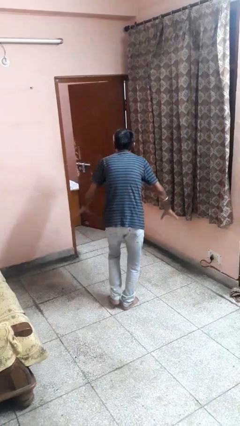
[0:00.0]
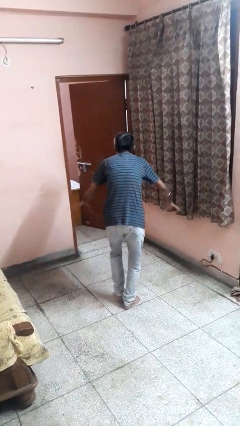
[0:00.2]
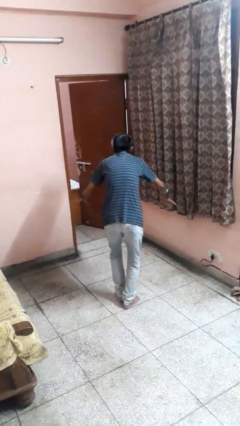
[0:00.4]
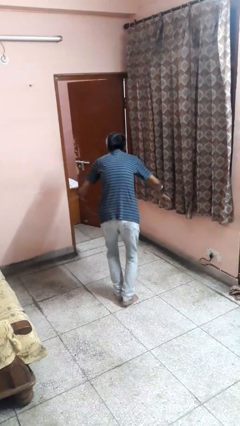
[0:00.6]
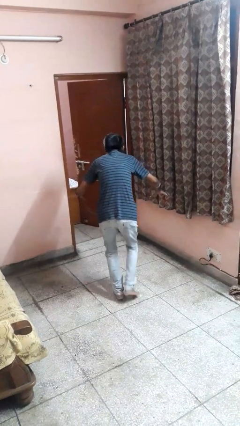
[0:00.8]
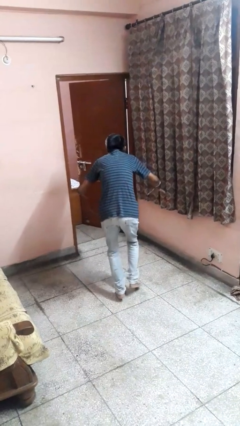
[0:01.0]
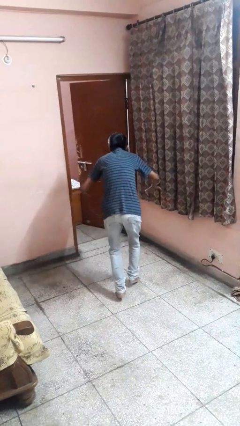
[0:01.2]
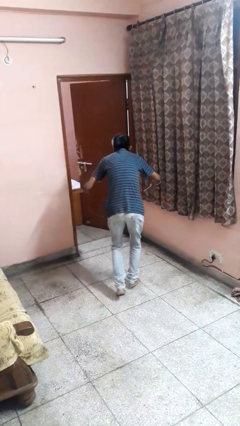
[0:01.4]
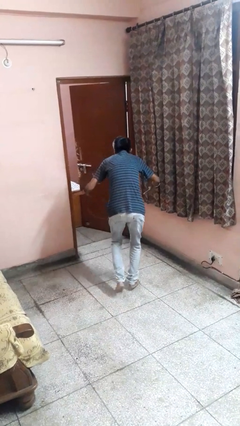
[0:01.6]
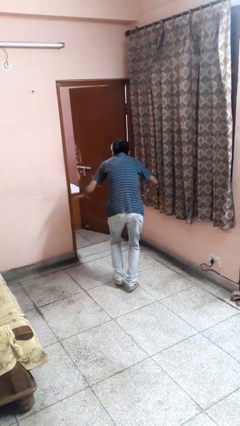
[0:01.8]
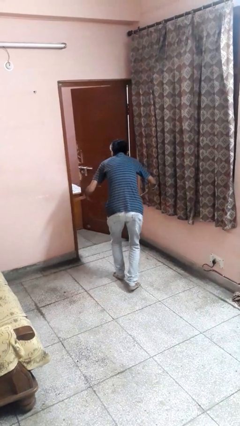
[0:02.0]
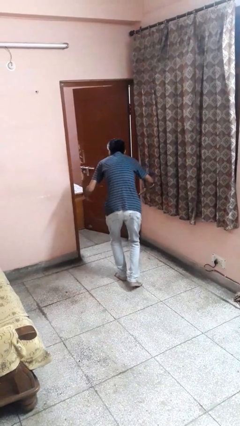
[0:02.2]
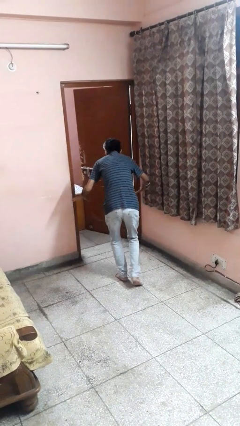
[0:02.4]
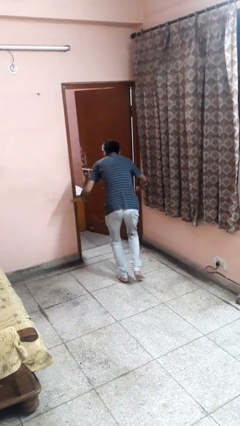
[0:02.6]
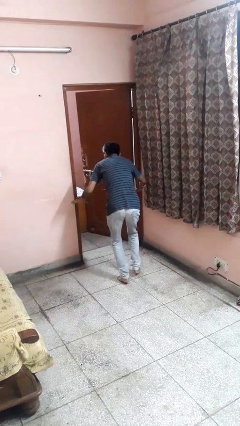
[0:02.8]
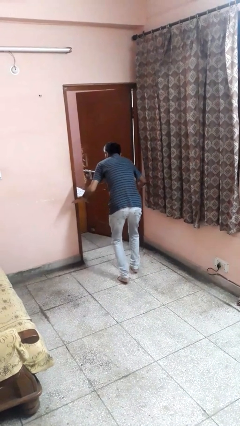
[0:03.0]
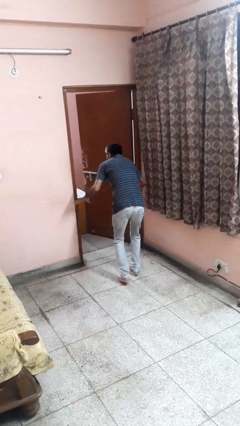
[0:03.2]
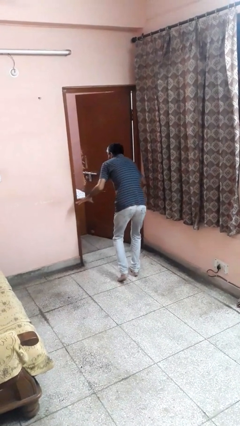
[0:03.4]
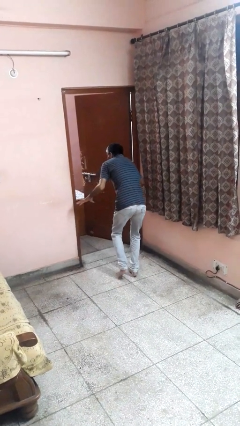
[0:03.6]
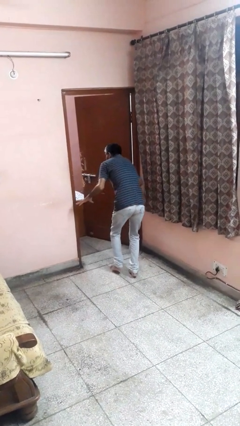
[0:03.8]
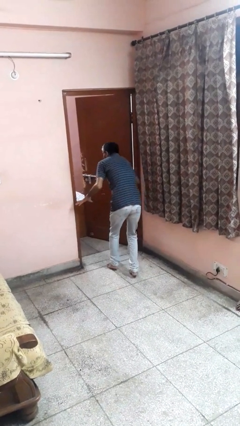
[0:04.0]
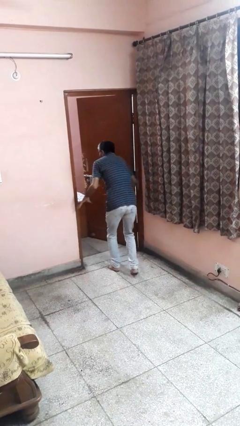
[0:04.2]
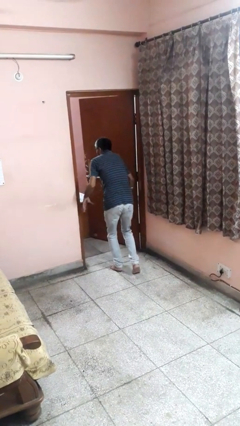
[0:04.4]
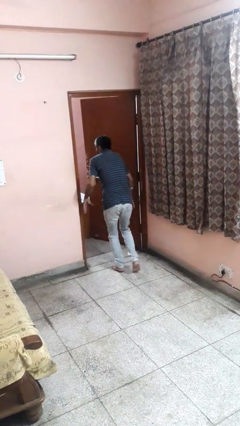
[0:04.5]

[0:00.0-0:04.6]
person walks tiptoe

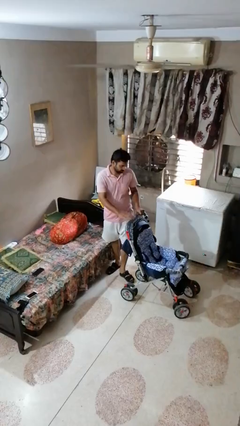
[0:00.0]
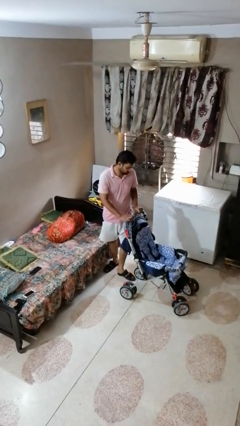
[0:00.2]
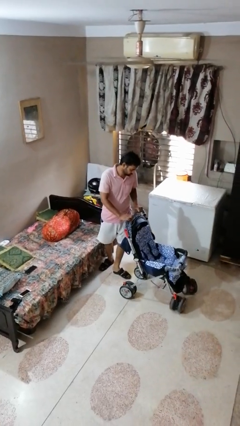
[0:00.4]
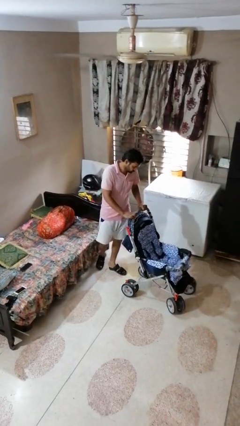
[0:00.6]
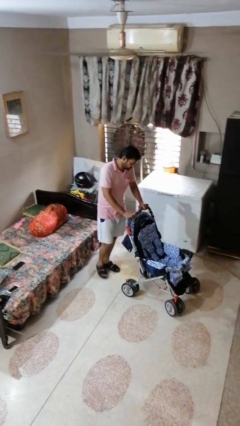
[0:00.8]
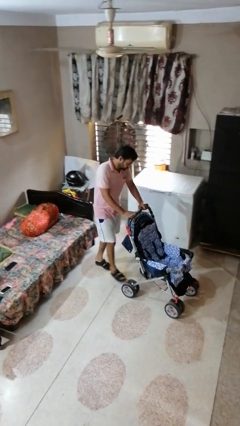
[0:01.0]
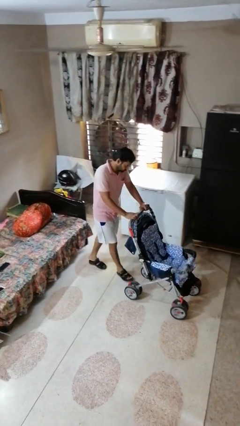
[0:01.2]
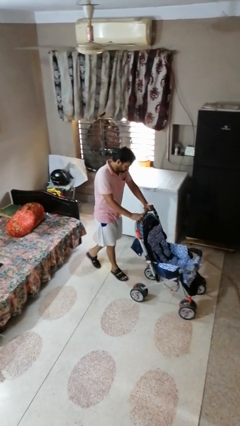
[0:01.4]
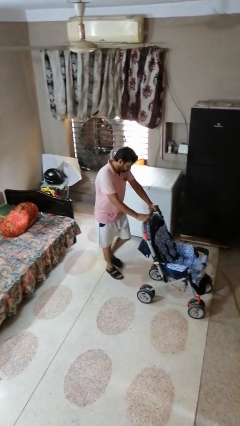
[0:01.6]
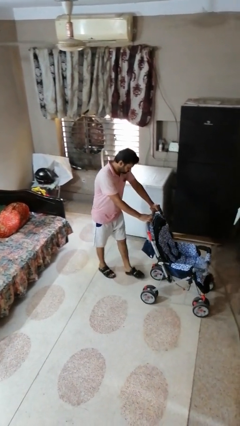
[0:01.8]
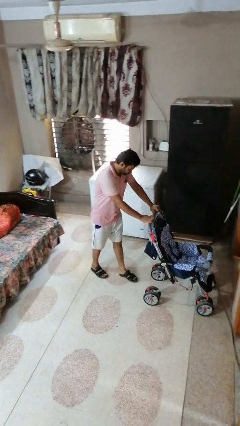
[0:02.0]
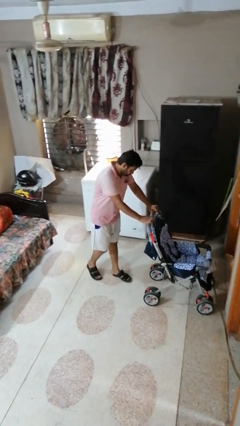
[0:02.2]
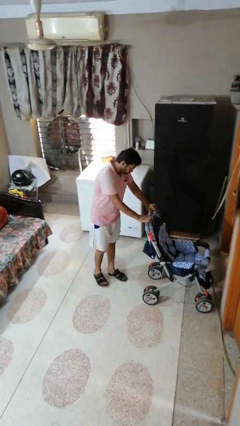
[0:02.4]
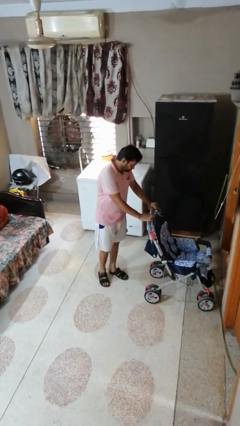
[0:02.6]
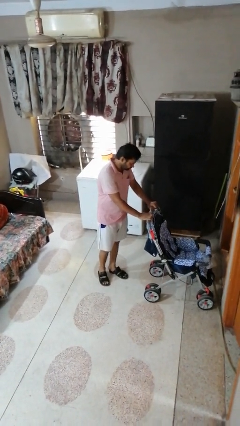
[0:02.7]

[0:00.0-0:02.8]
person pushes wheeled cart

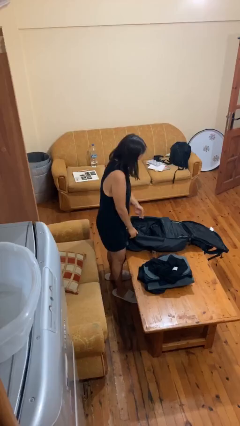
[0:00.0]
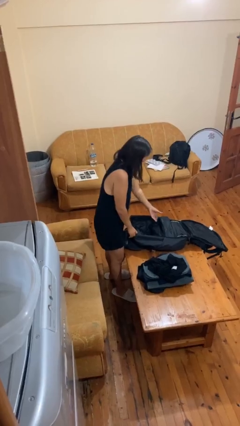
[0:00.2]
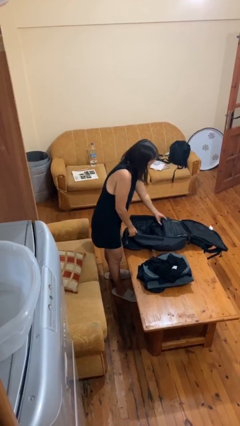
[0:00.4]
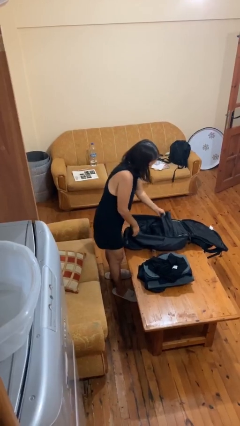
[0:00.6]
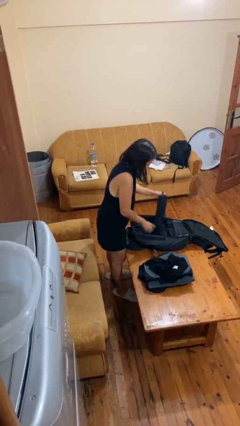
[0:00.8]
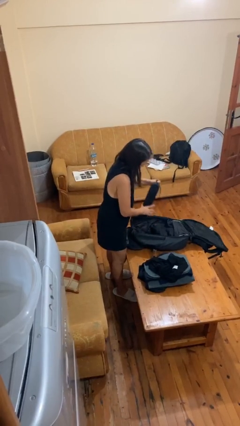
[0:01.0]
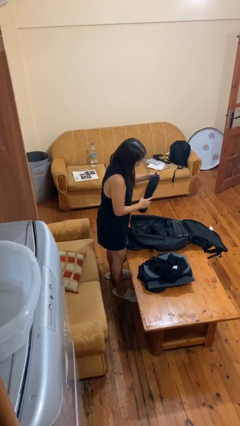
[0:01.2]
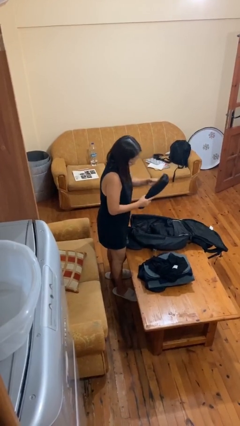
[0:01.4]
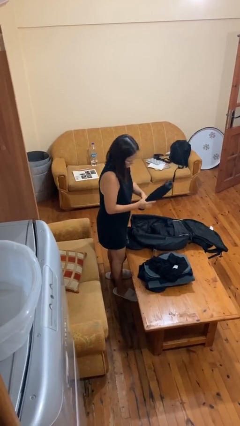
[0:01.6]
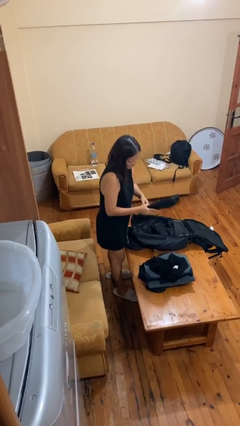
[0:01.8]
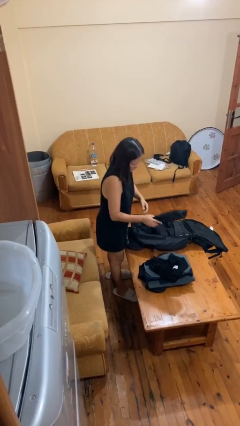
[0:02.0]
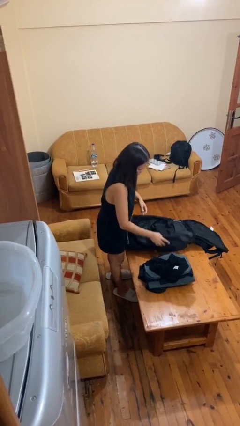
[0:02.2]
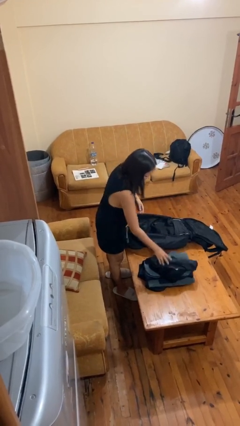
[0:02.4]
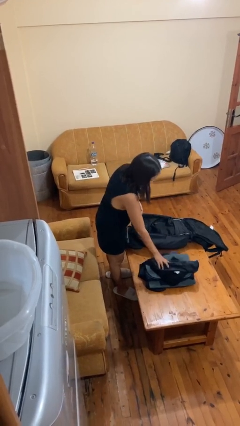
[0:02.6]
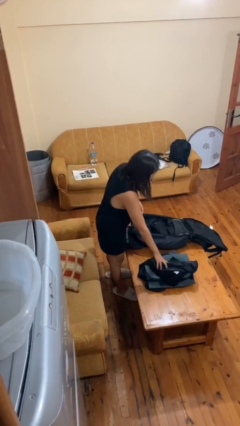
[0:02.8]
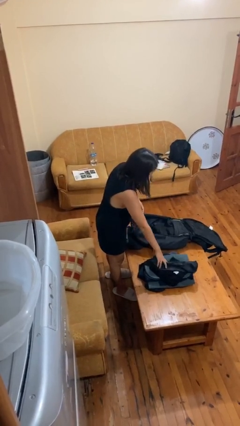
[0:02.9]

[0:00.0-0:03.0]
person unloads clothes from suitcase

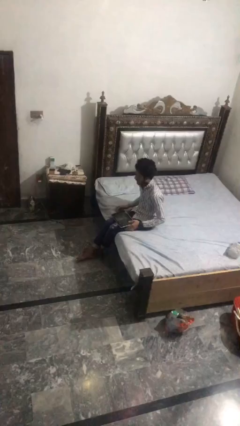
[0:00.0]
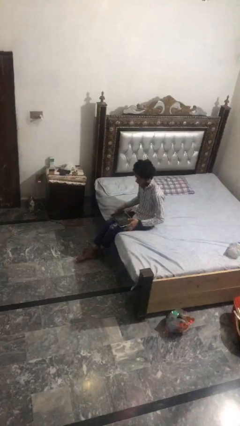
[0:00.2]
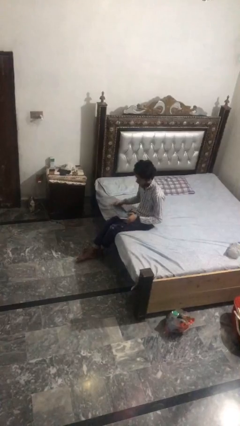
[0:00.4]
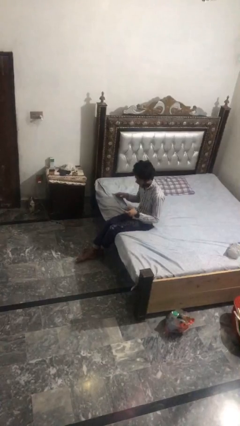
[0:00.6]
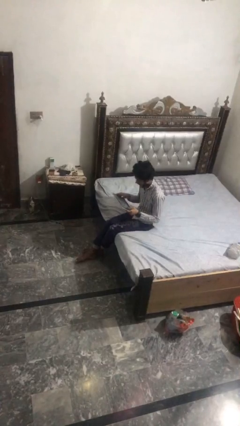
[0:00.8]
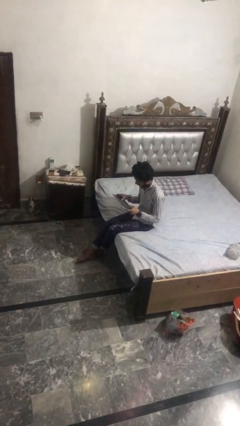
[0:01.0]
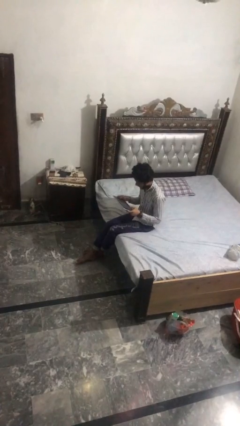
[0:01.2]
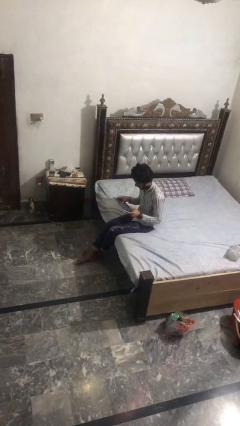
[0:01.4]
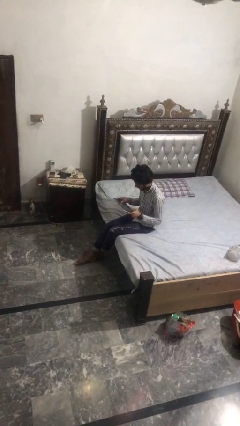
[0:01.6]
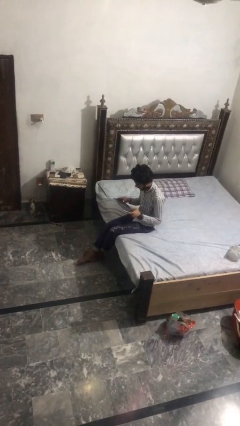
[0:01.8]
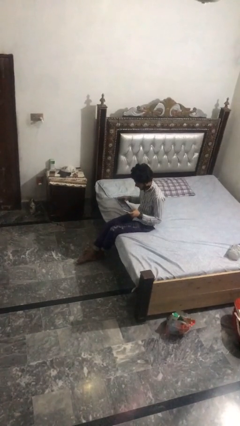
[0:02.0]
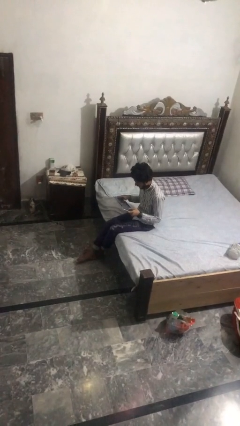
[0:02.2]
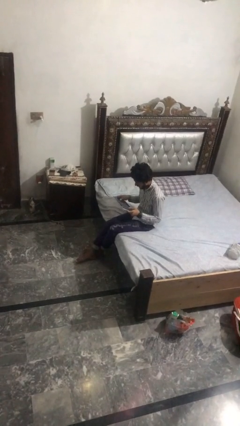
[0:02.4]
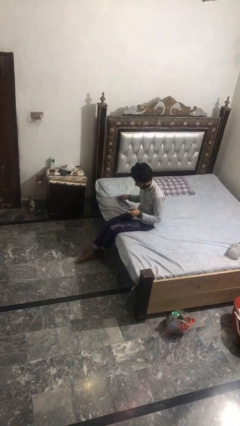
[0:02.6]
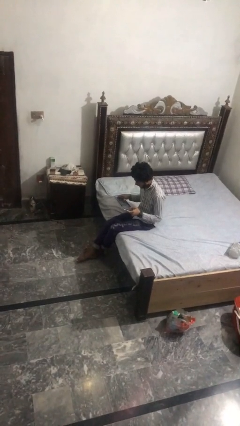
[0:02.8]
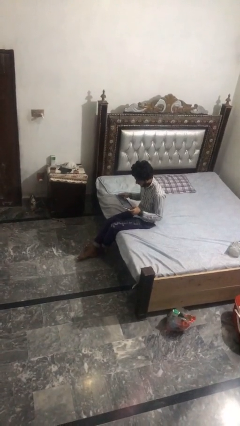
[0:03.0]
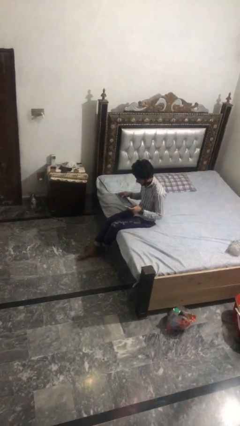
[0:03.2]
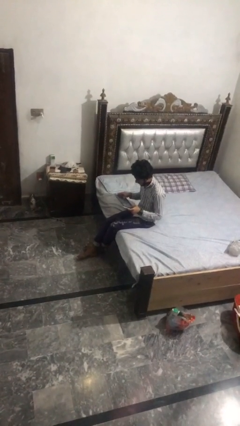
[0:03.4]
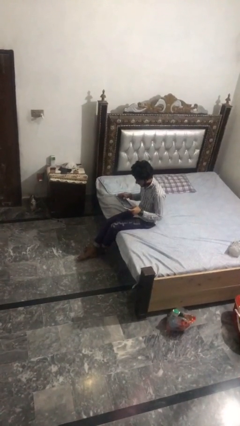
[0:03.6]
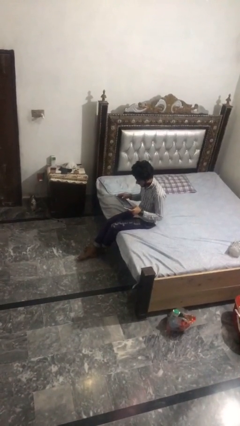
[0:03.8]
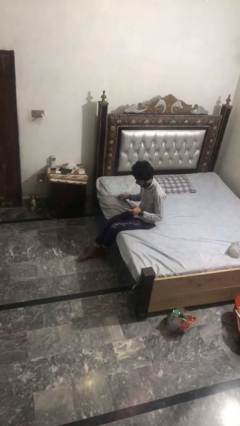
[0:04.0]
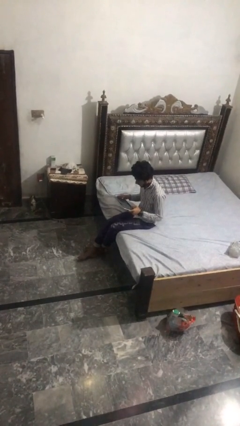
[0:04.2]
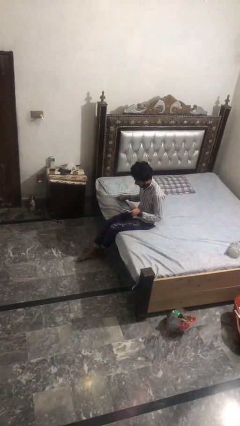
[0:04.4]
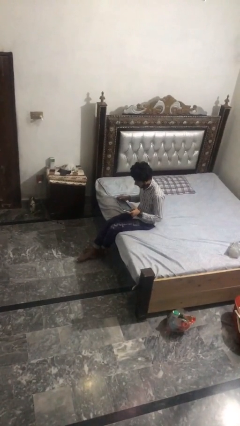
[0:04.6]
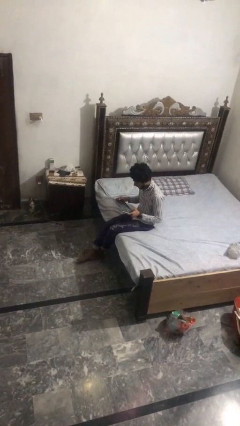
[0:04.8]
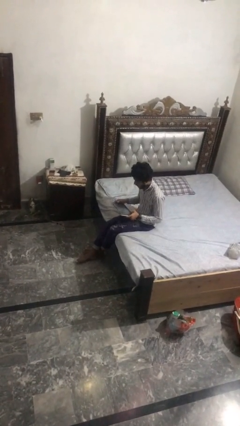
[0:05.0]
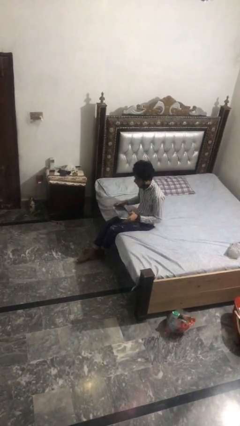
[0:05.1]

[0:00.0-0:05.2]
person interacts with tablet

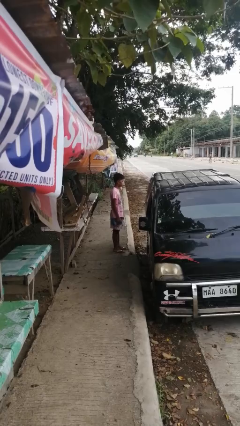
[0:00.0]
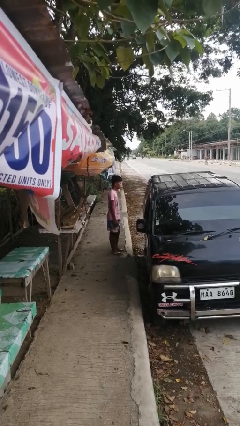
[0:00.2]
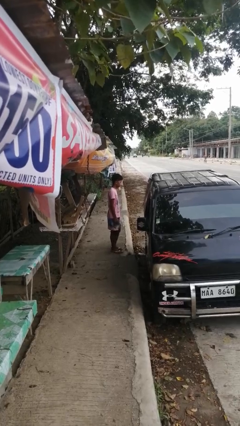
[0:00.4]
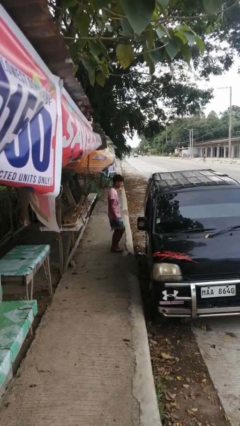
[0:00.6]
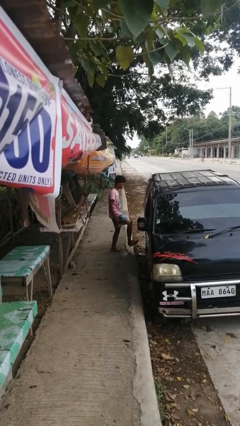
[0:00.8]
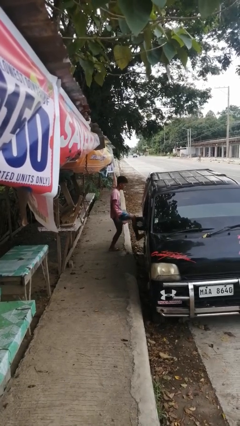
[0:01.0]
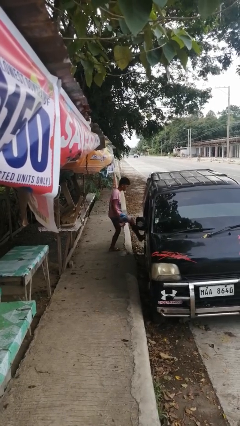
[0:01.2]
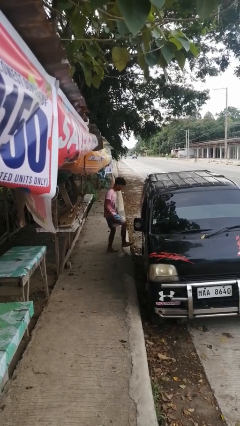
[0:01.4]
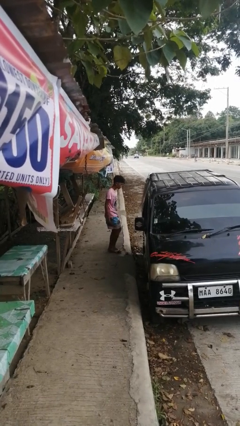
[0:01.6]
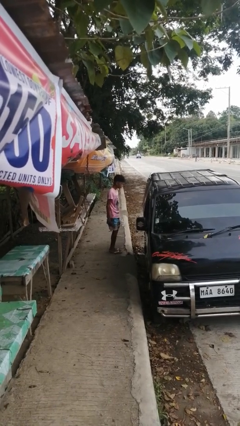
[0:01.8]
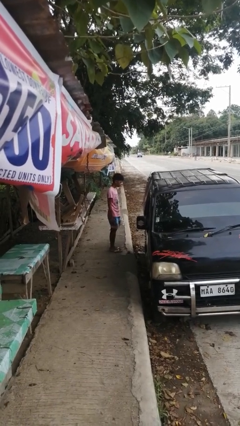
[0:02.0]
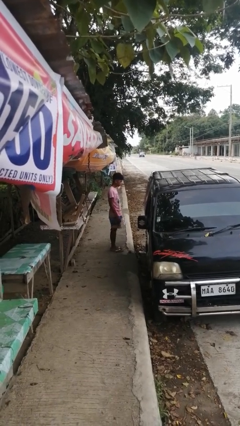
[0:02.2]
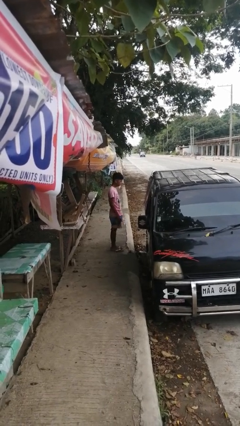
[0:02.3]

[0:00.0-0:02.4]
person kicks car tires
